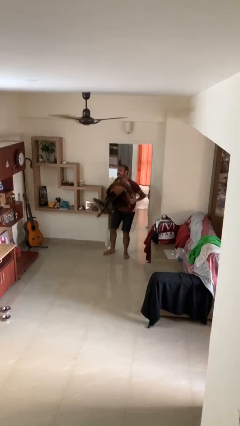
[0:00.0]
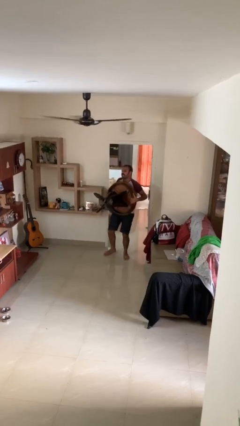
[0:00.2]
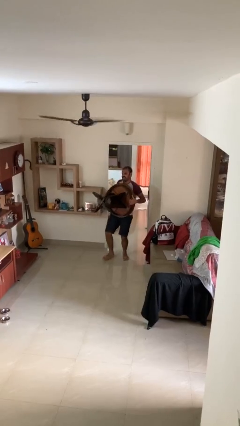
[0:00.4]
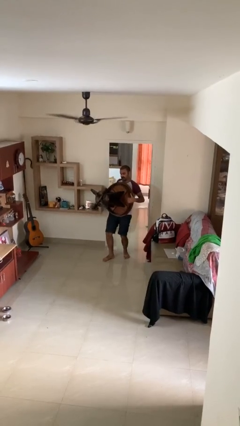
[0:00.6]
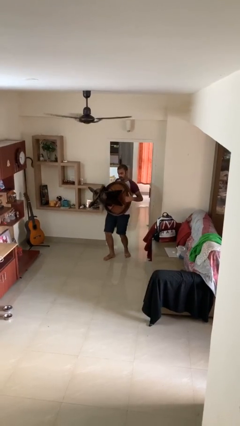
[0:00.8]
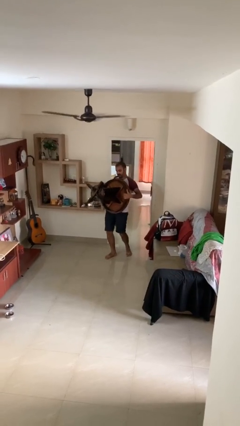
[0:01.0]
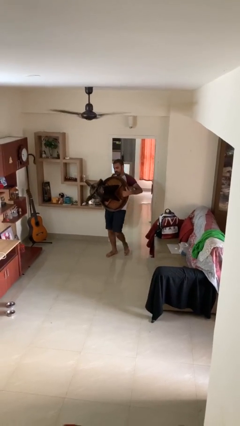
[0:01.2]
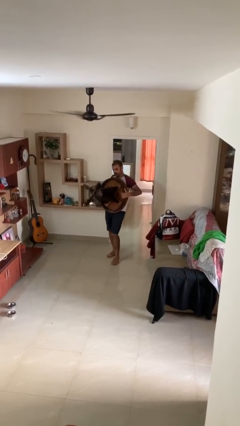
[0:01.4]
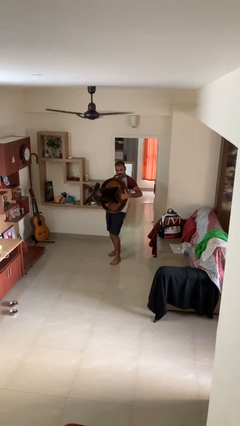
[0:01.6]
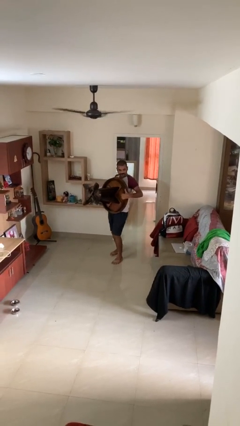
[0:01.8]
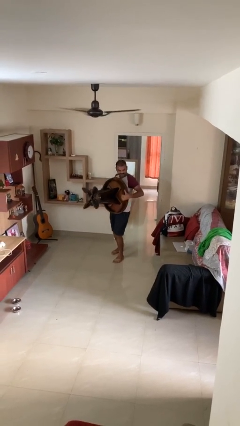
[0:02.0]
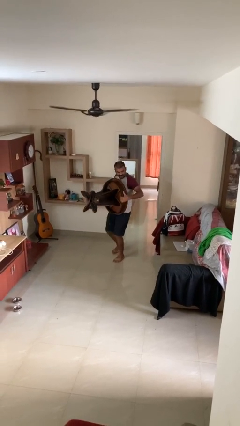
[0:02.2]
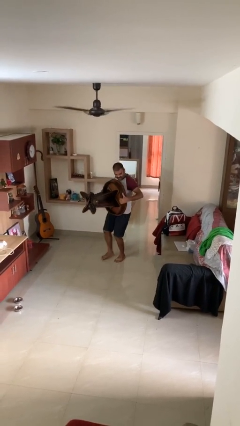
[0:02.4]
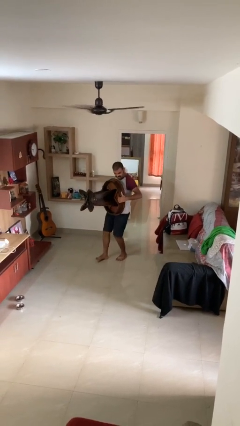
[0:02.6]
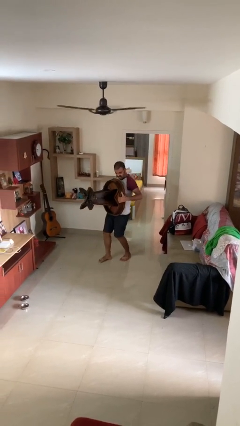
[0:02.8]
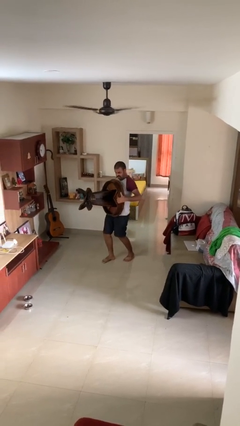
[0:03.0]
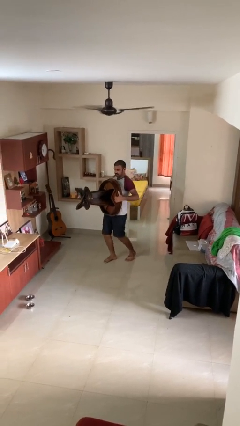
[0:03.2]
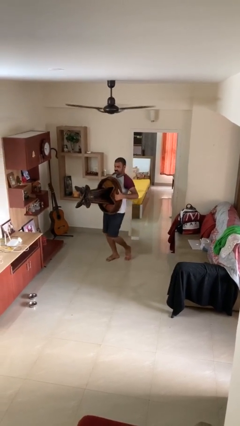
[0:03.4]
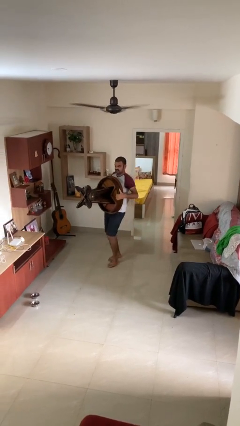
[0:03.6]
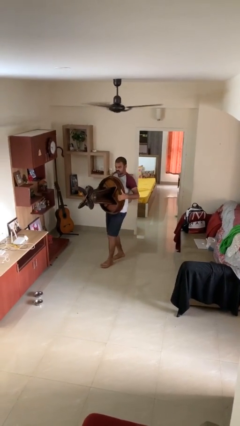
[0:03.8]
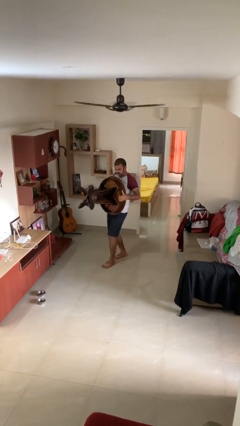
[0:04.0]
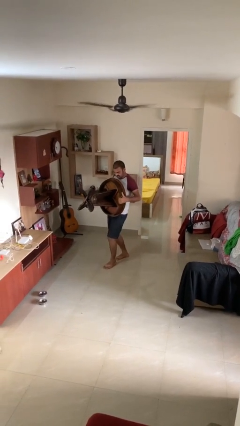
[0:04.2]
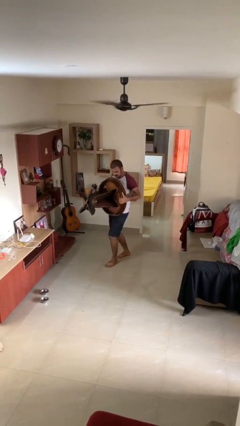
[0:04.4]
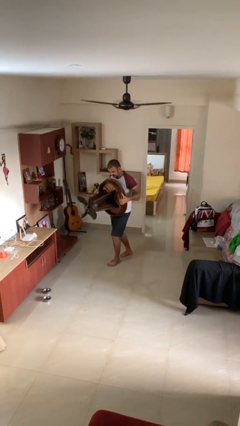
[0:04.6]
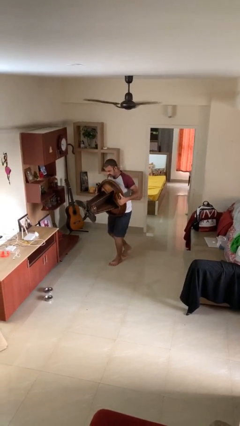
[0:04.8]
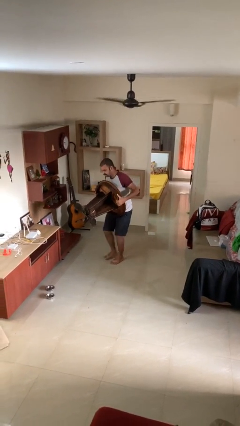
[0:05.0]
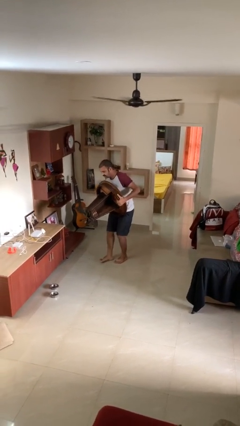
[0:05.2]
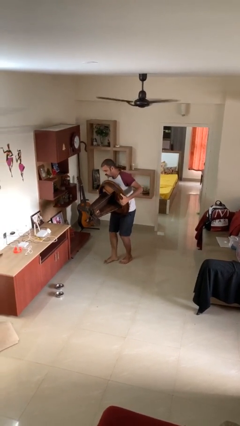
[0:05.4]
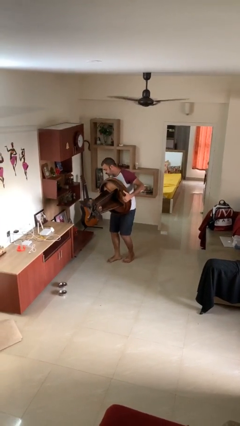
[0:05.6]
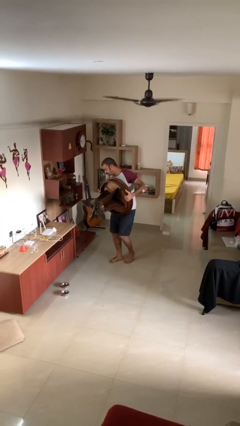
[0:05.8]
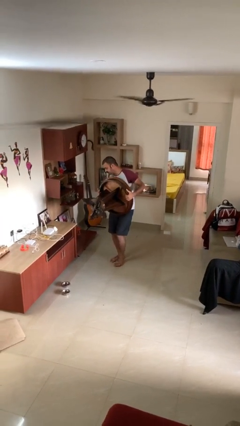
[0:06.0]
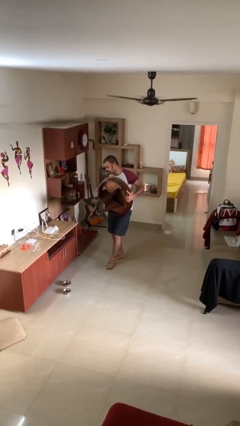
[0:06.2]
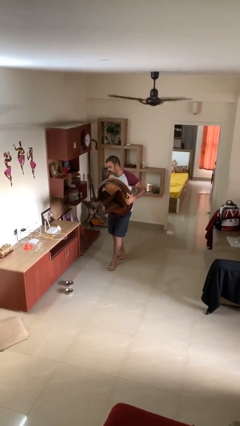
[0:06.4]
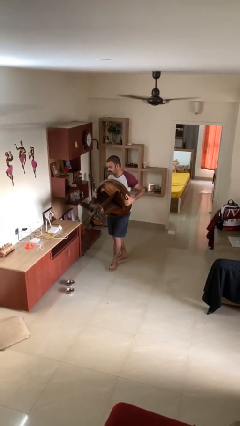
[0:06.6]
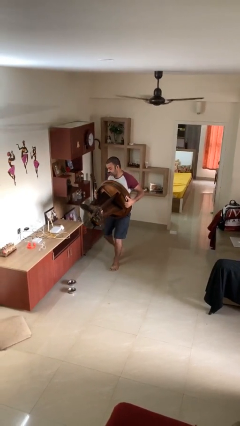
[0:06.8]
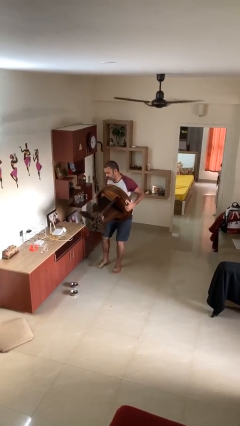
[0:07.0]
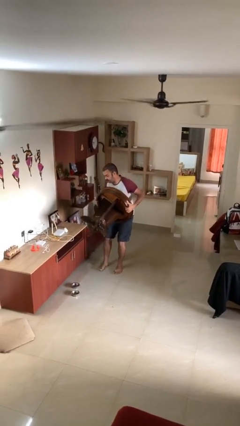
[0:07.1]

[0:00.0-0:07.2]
person carries heavy object

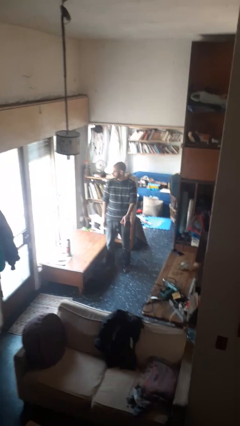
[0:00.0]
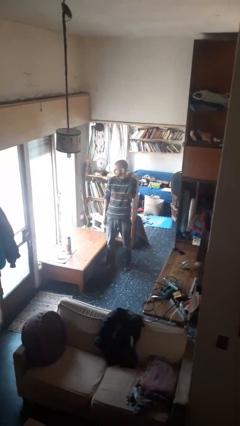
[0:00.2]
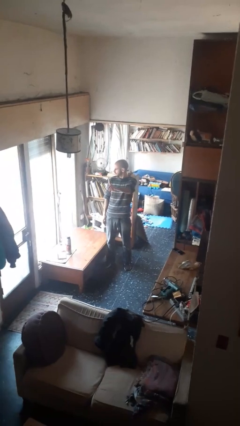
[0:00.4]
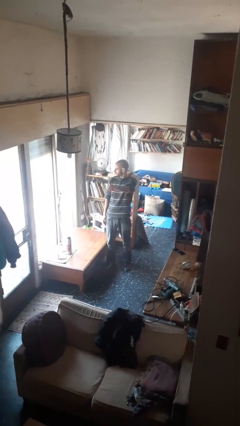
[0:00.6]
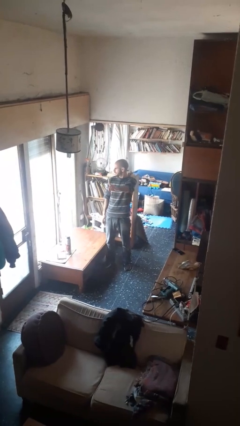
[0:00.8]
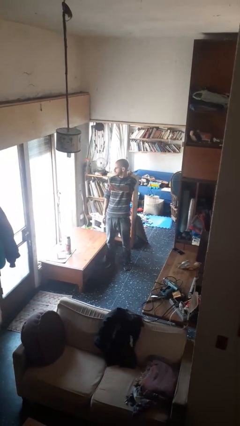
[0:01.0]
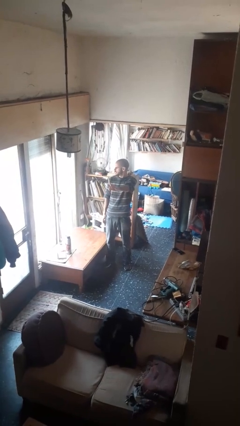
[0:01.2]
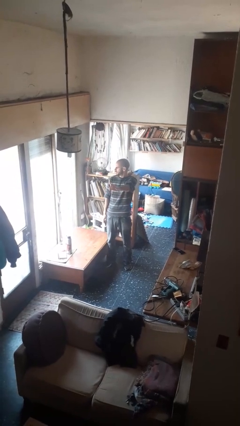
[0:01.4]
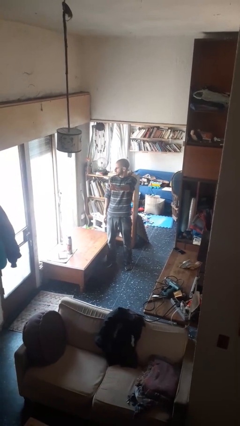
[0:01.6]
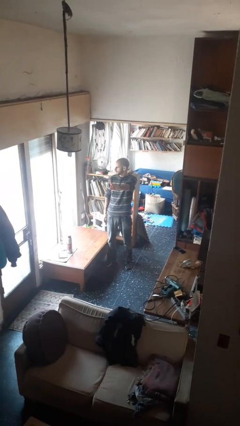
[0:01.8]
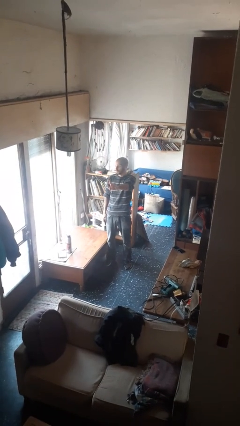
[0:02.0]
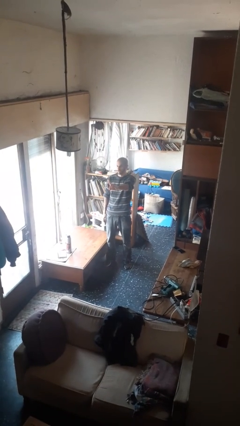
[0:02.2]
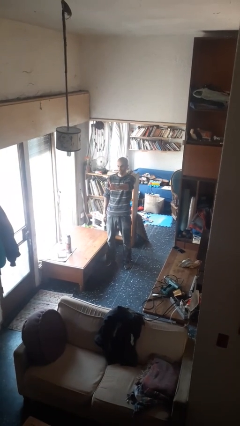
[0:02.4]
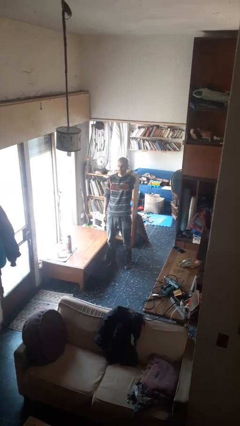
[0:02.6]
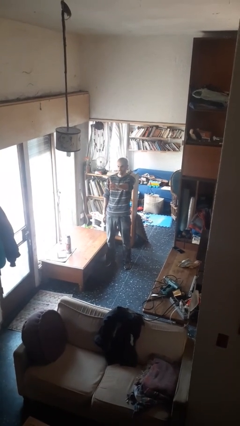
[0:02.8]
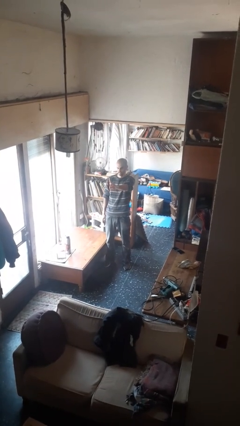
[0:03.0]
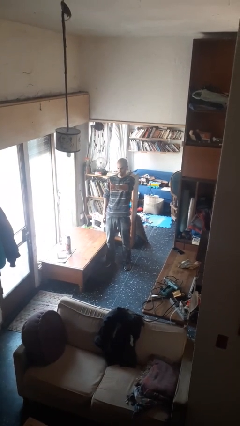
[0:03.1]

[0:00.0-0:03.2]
person gestures number one

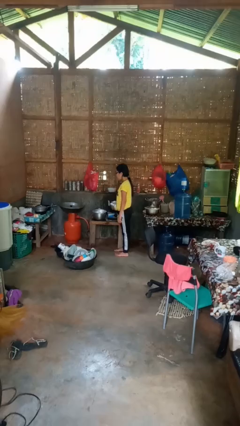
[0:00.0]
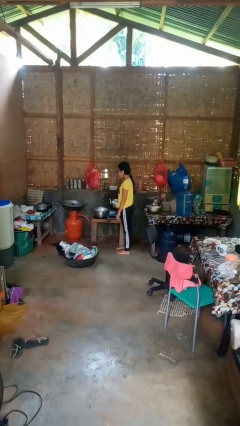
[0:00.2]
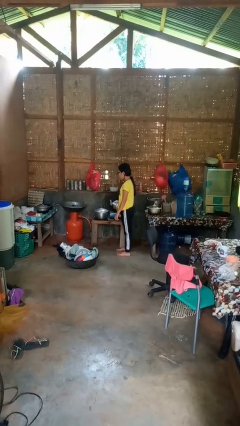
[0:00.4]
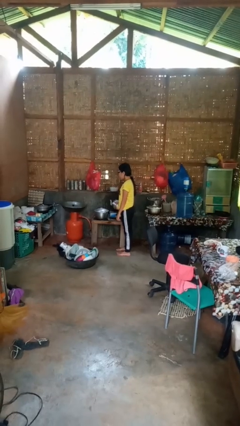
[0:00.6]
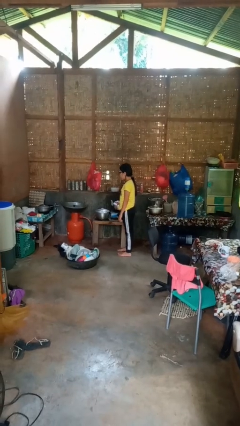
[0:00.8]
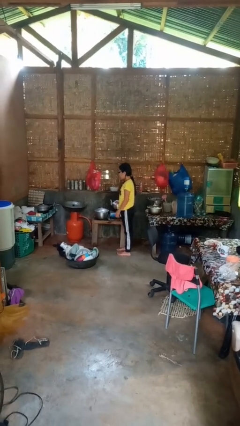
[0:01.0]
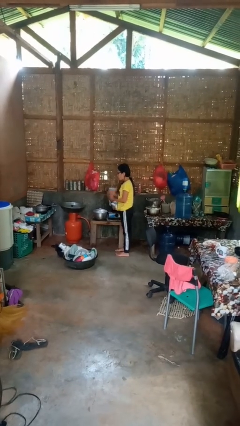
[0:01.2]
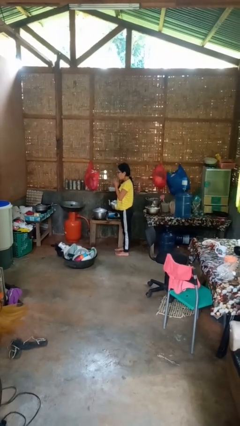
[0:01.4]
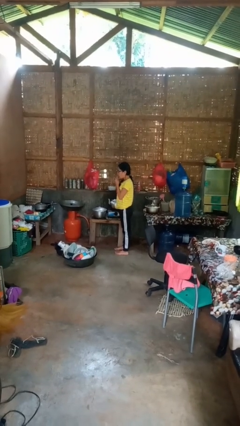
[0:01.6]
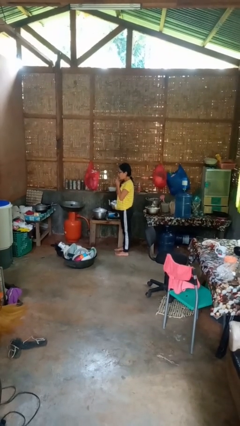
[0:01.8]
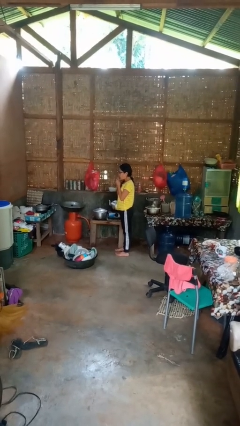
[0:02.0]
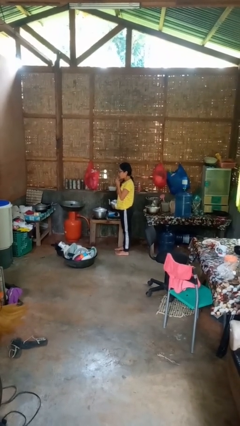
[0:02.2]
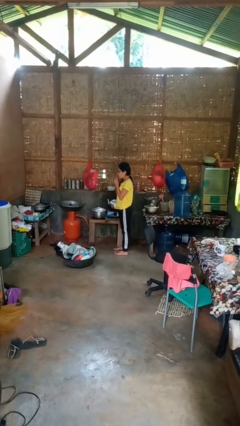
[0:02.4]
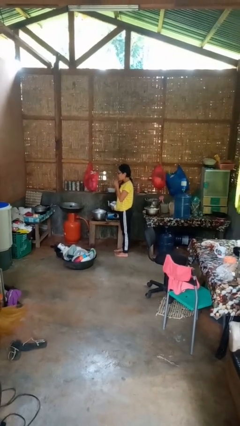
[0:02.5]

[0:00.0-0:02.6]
person burns hand

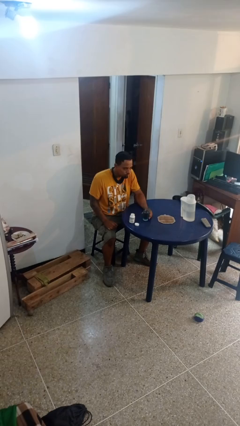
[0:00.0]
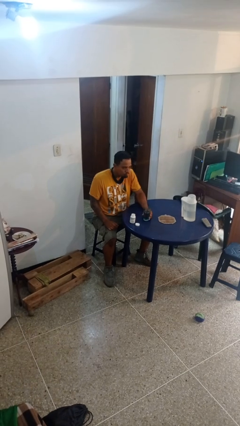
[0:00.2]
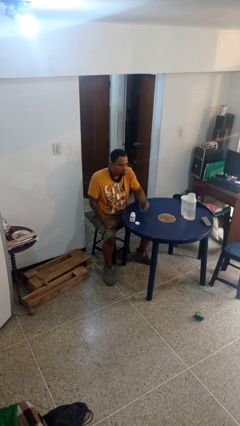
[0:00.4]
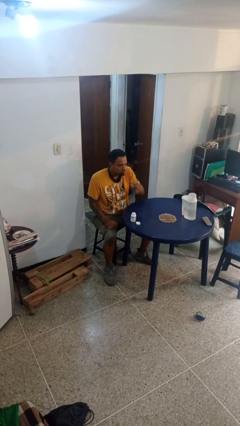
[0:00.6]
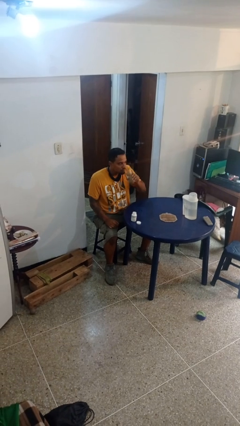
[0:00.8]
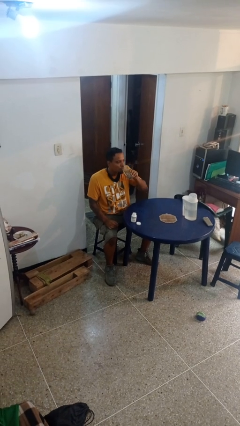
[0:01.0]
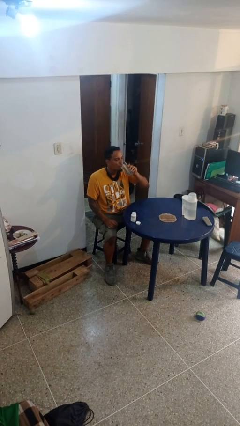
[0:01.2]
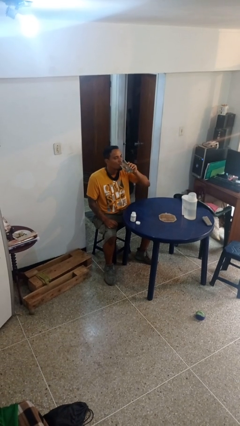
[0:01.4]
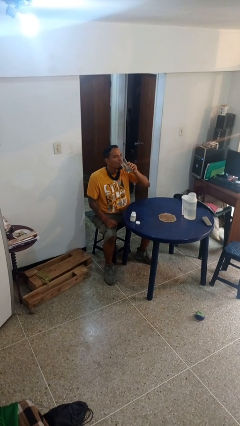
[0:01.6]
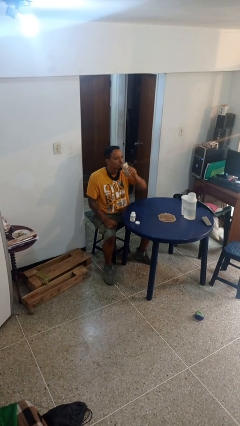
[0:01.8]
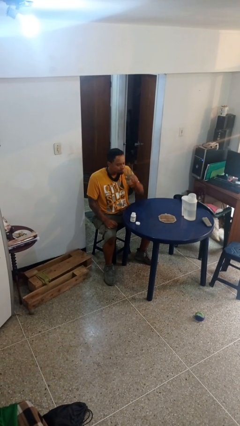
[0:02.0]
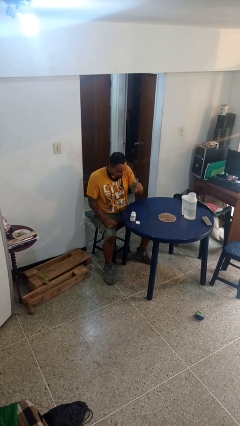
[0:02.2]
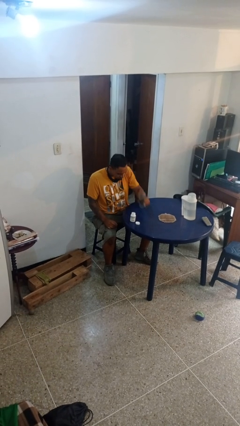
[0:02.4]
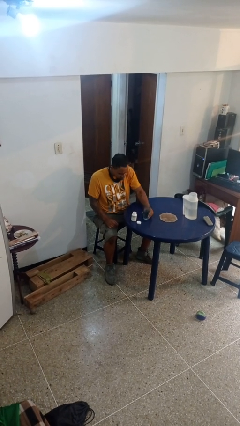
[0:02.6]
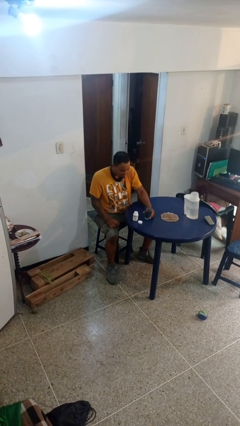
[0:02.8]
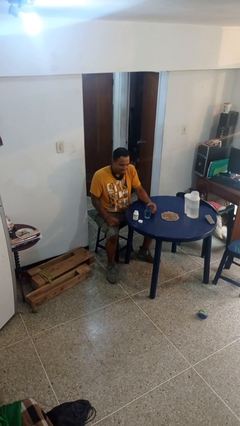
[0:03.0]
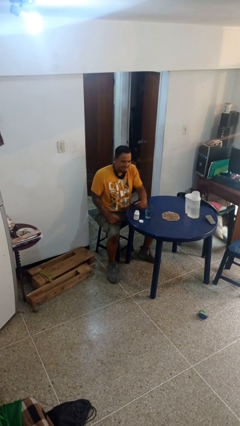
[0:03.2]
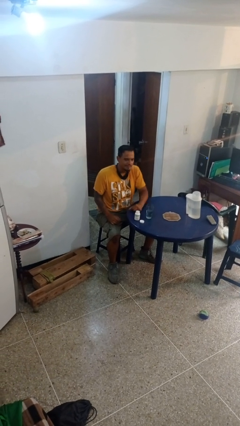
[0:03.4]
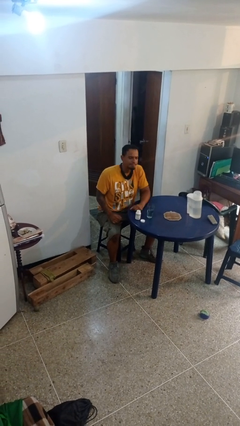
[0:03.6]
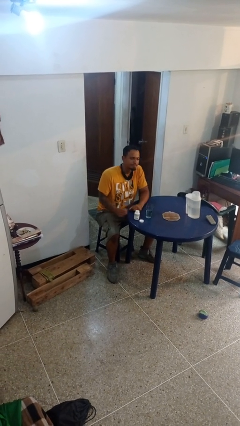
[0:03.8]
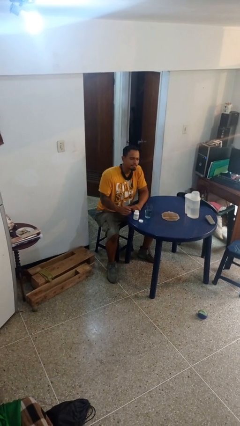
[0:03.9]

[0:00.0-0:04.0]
person drinks from cup

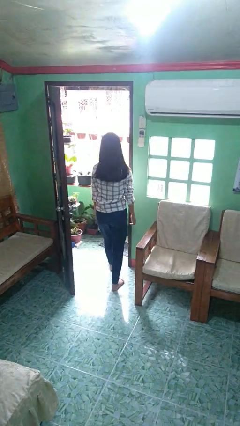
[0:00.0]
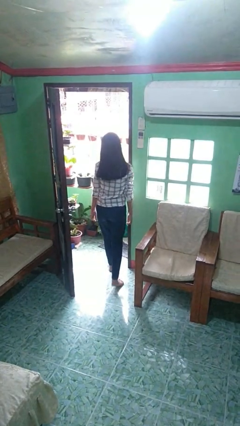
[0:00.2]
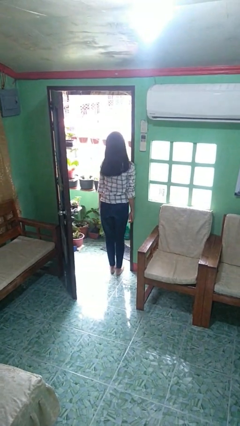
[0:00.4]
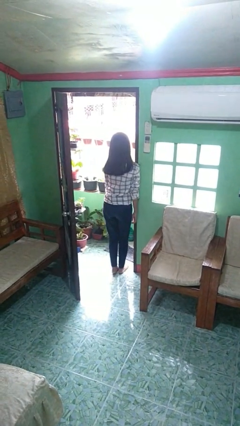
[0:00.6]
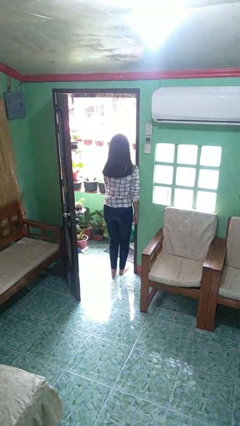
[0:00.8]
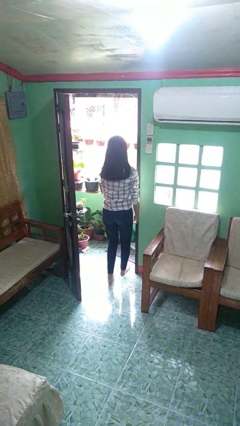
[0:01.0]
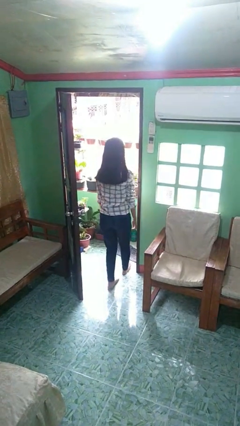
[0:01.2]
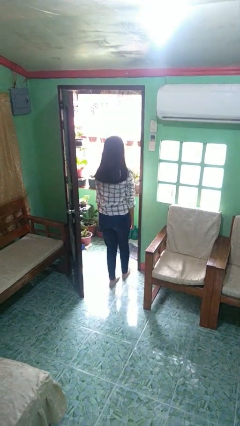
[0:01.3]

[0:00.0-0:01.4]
person bumps into wall
